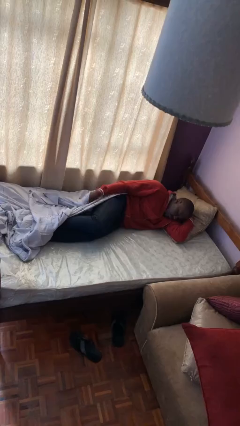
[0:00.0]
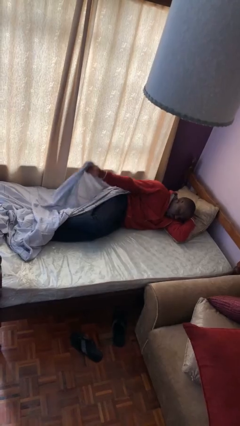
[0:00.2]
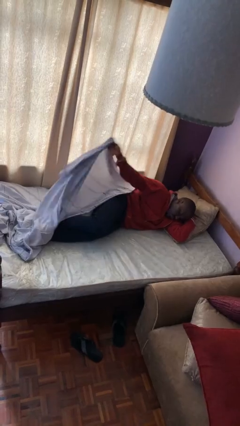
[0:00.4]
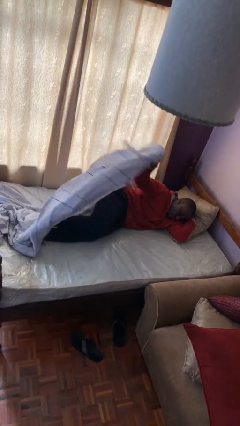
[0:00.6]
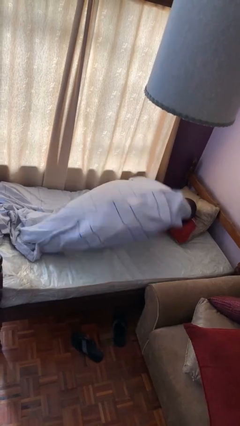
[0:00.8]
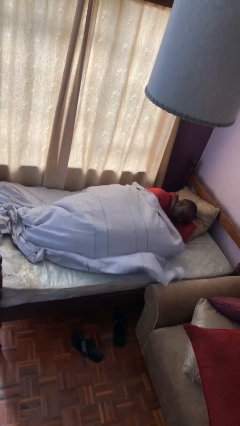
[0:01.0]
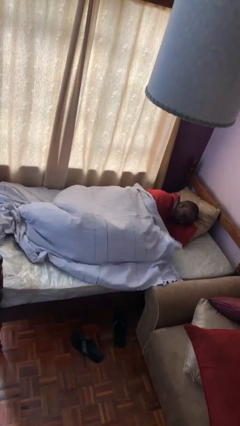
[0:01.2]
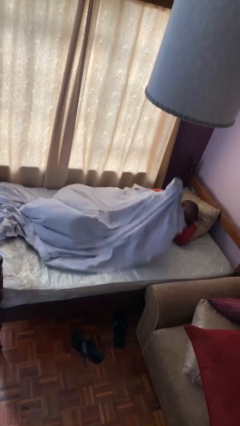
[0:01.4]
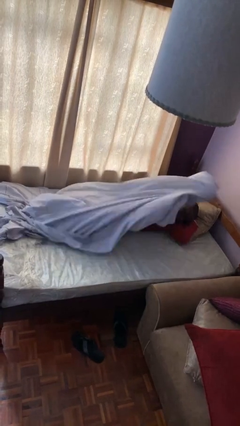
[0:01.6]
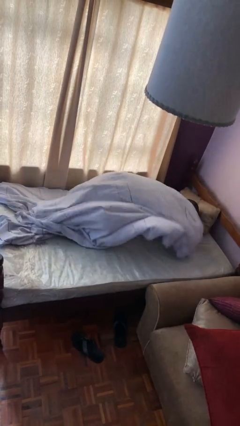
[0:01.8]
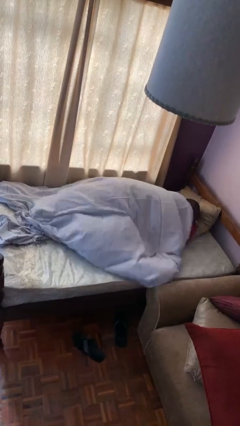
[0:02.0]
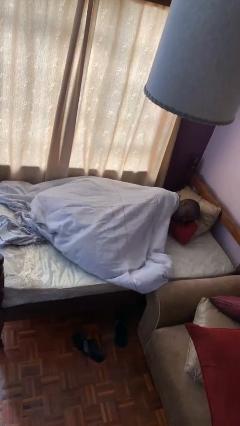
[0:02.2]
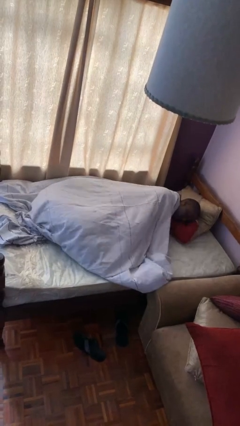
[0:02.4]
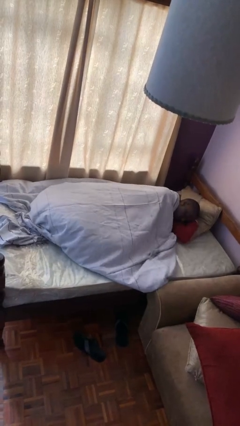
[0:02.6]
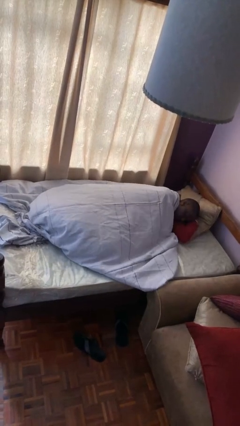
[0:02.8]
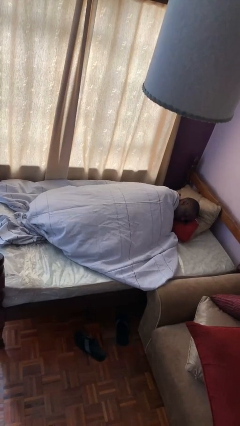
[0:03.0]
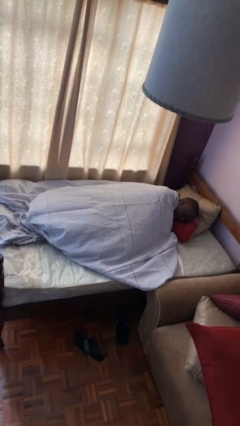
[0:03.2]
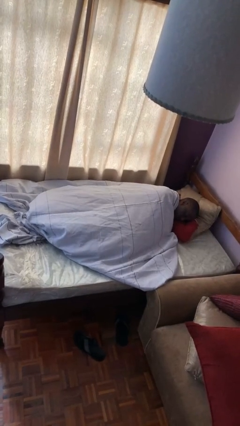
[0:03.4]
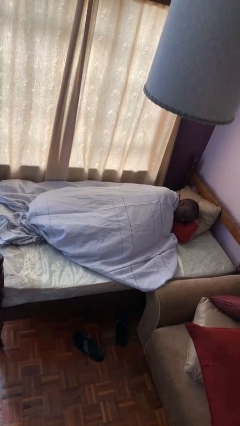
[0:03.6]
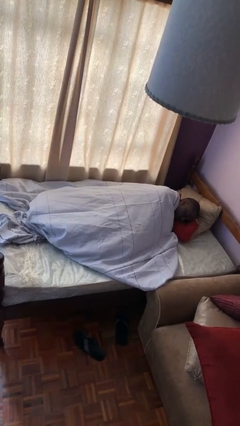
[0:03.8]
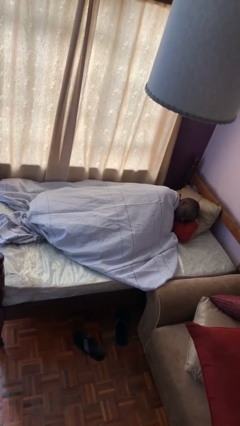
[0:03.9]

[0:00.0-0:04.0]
person covers with bedsheets

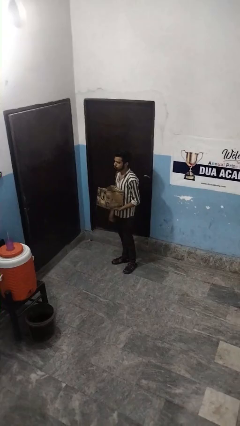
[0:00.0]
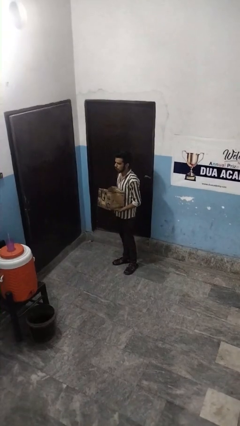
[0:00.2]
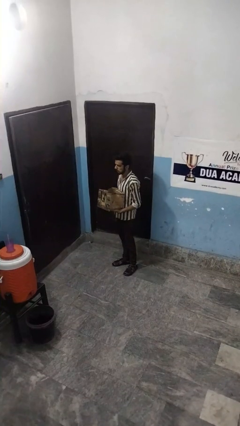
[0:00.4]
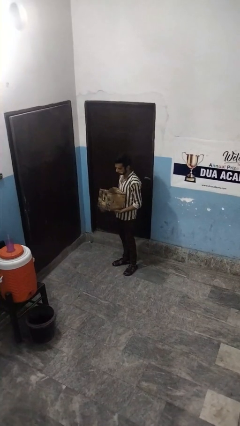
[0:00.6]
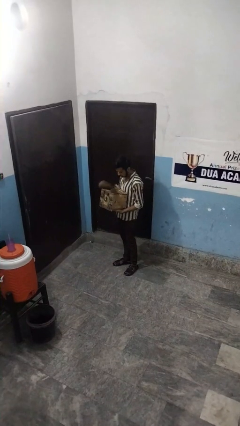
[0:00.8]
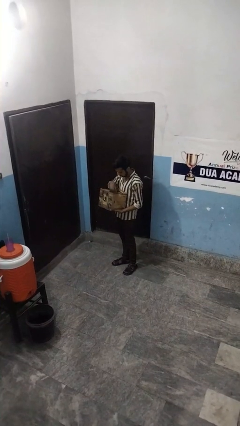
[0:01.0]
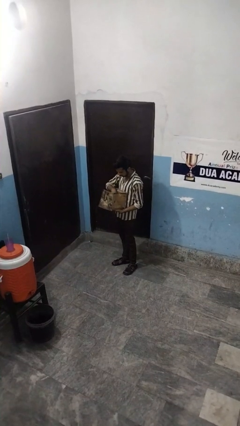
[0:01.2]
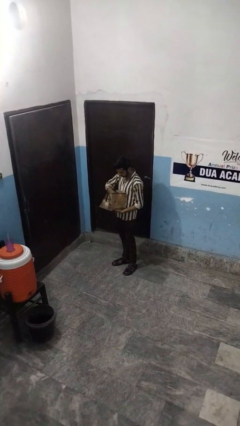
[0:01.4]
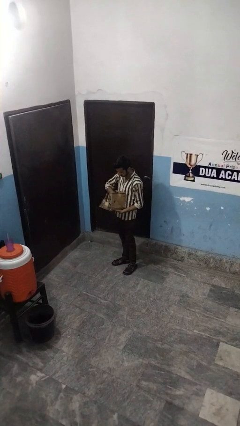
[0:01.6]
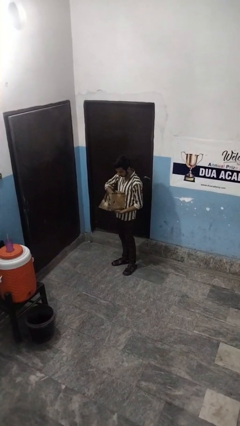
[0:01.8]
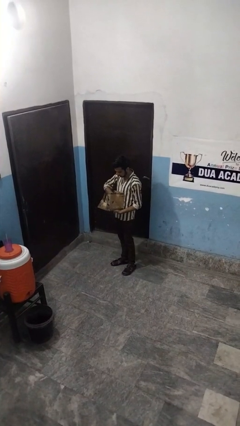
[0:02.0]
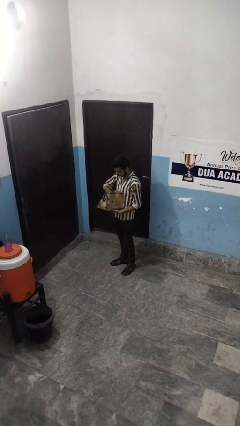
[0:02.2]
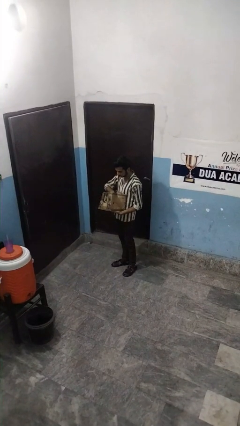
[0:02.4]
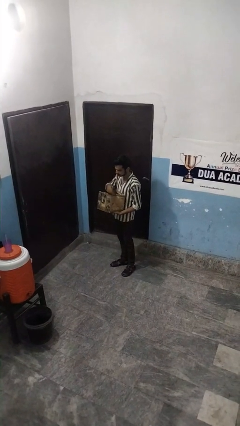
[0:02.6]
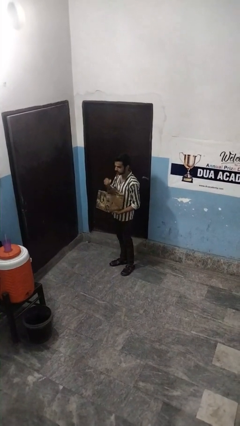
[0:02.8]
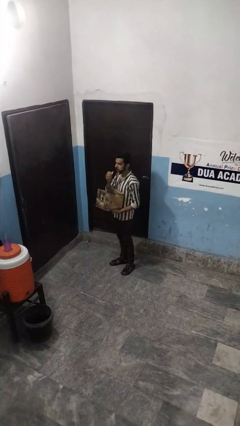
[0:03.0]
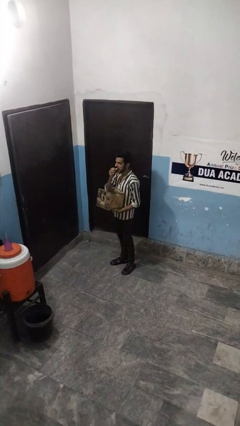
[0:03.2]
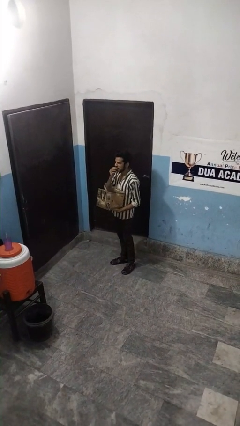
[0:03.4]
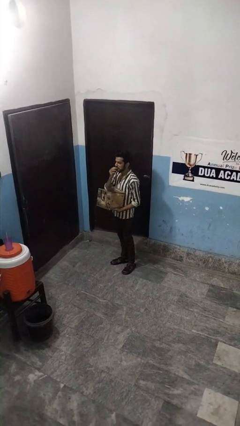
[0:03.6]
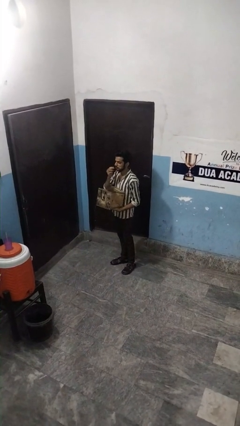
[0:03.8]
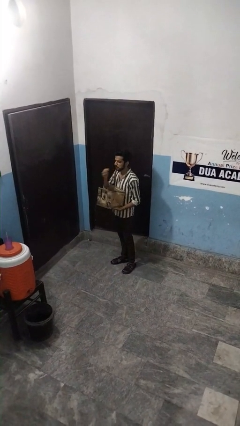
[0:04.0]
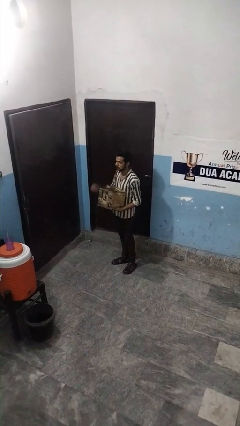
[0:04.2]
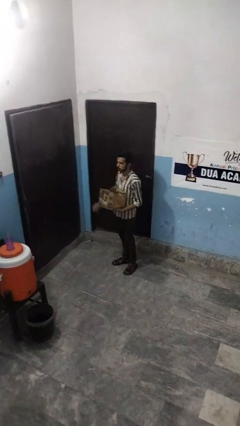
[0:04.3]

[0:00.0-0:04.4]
person eats snack from bag

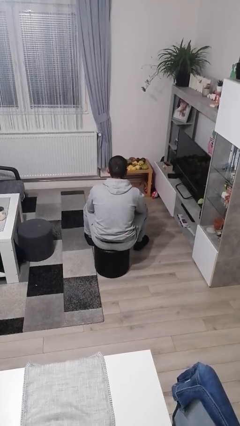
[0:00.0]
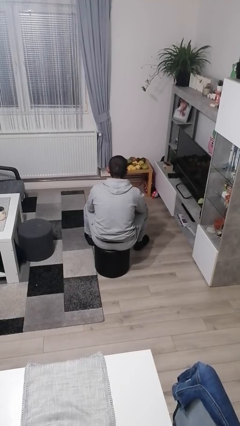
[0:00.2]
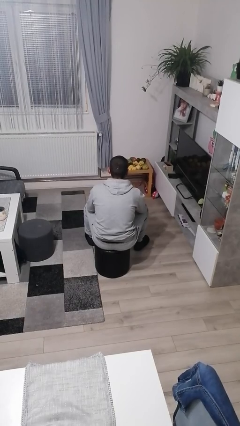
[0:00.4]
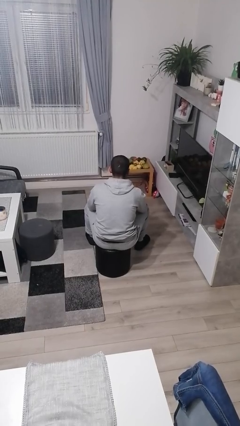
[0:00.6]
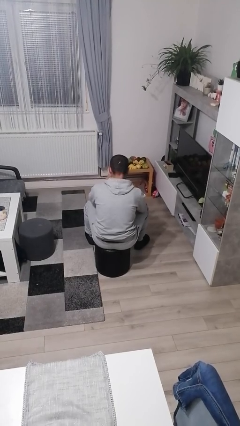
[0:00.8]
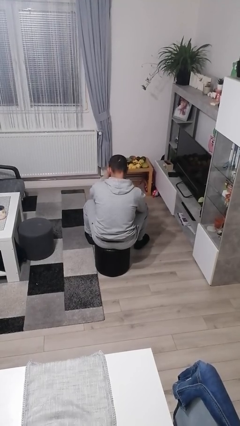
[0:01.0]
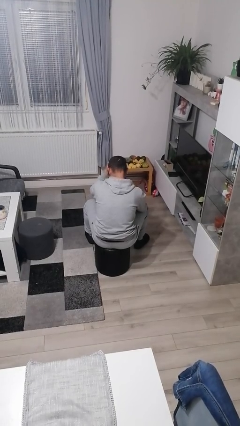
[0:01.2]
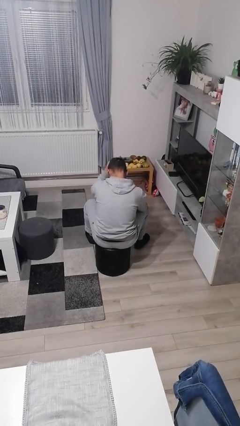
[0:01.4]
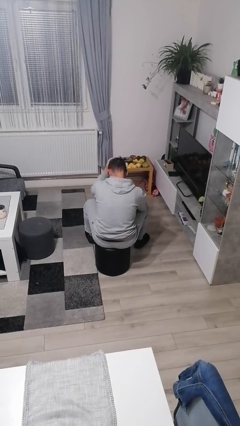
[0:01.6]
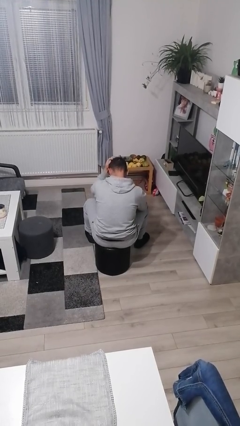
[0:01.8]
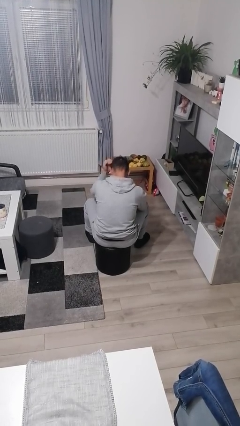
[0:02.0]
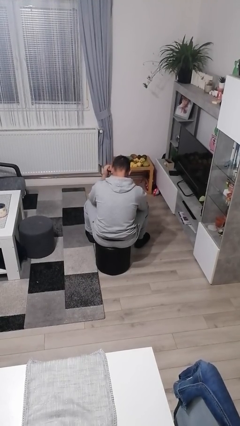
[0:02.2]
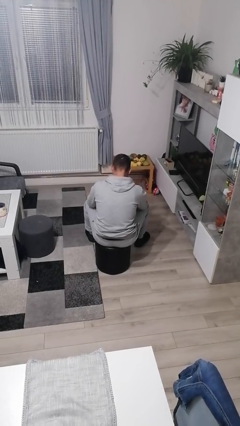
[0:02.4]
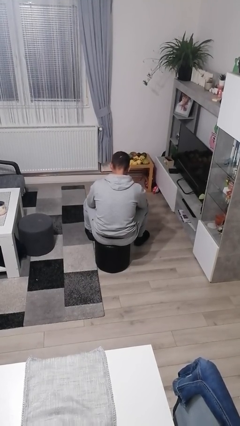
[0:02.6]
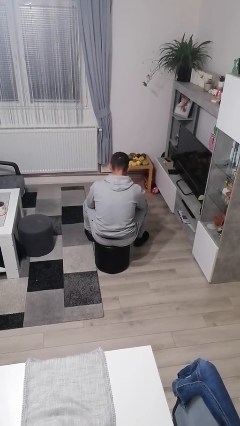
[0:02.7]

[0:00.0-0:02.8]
person strokes hair

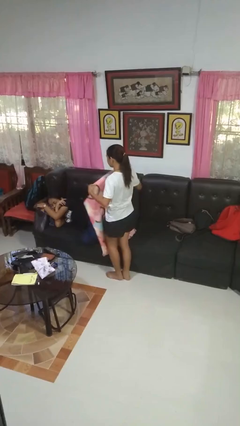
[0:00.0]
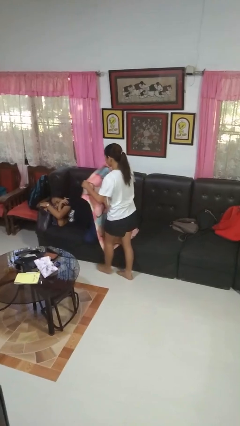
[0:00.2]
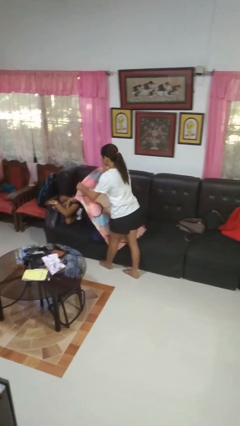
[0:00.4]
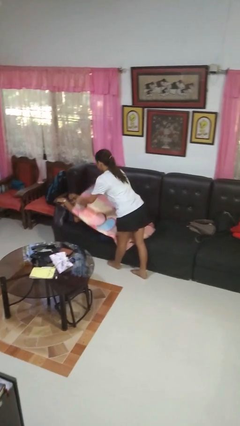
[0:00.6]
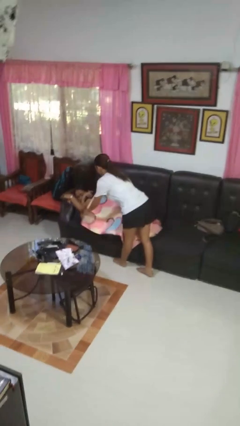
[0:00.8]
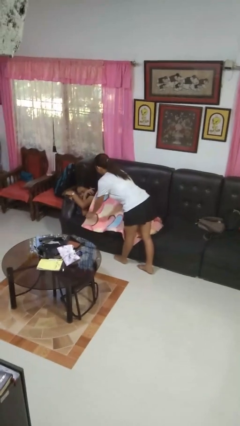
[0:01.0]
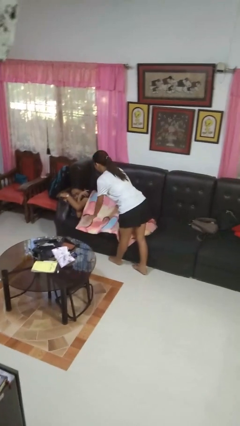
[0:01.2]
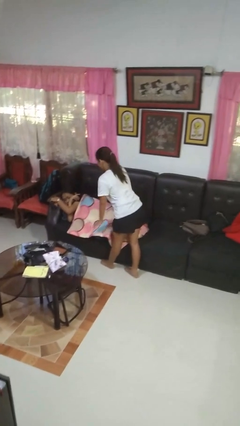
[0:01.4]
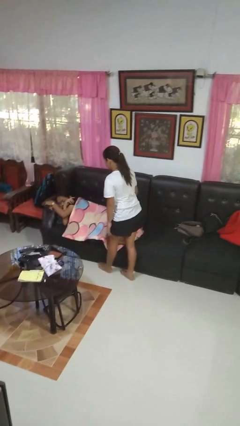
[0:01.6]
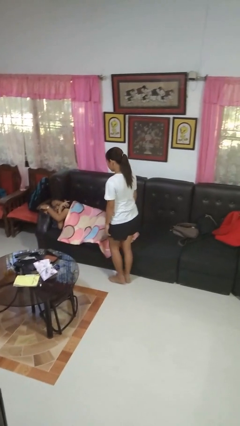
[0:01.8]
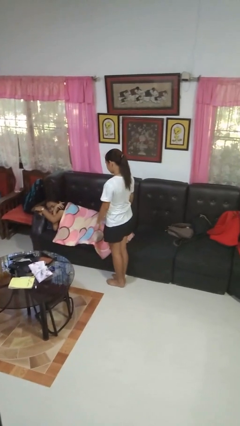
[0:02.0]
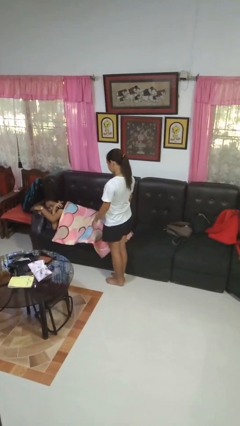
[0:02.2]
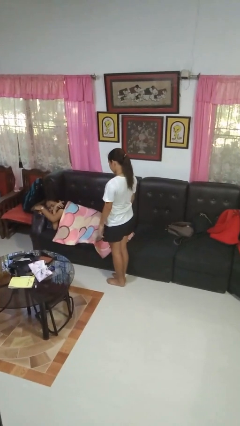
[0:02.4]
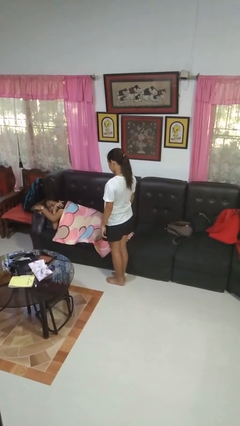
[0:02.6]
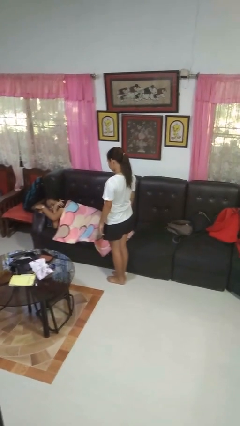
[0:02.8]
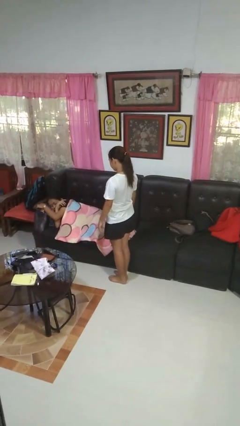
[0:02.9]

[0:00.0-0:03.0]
person covers friend with blanket

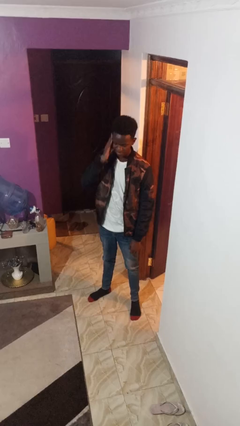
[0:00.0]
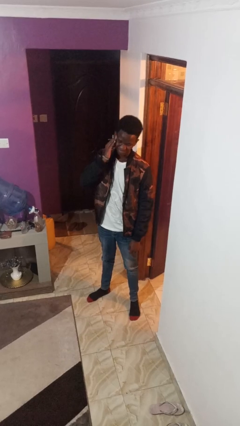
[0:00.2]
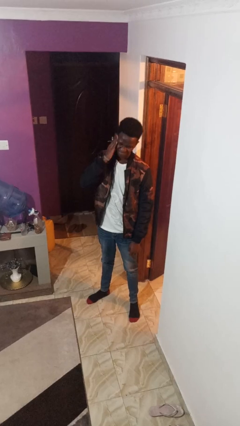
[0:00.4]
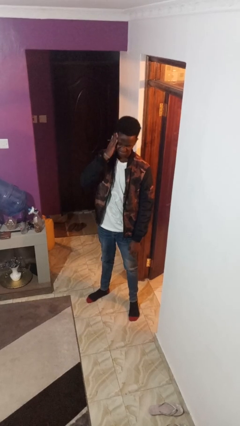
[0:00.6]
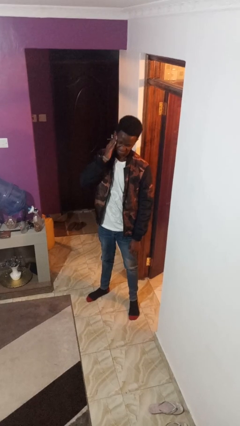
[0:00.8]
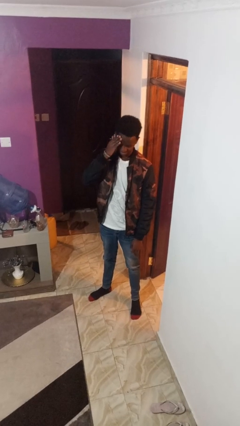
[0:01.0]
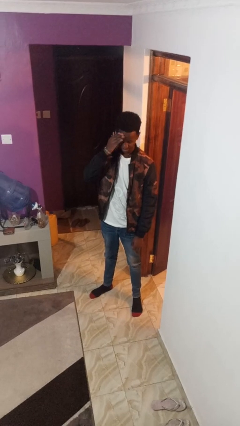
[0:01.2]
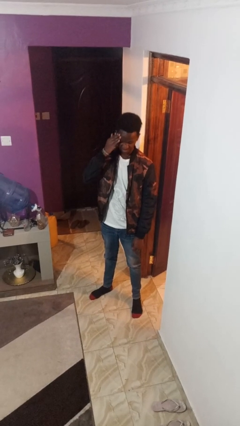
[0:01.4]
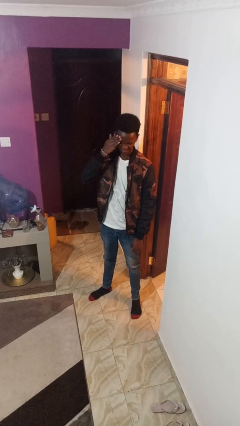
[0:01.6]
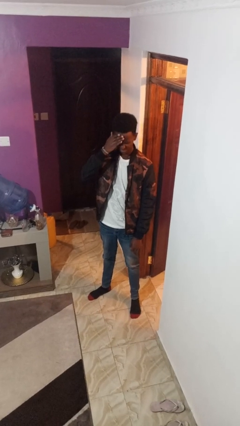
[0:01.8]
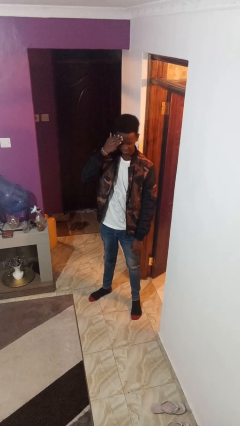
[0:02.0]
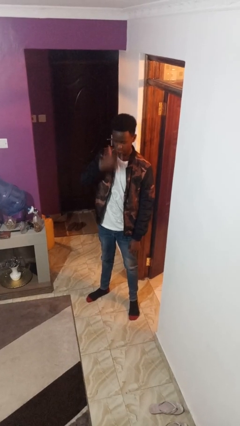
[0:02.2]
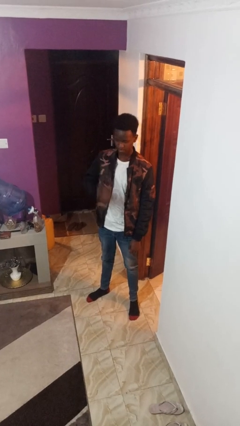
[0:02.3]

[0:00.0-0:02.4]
person scratches face

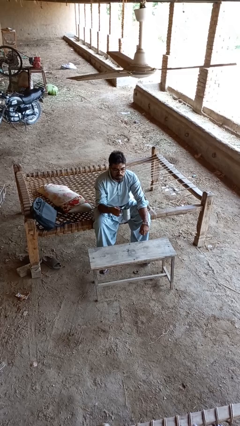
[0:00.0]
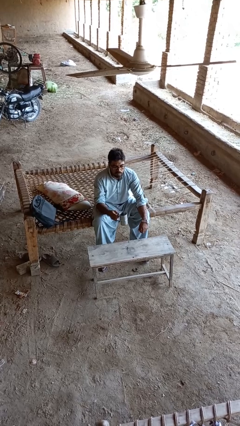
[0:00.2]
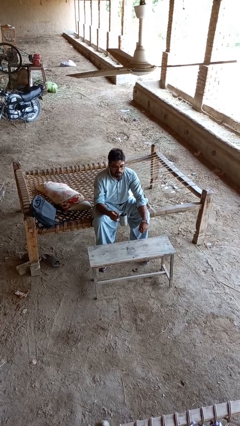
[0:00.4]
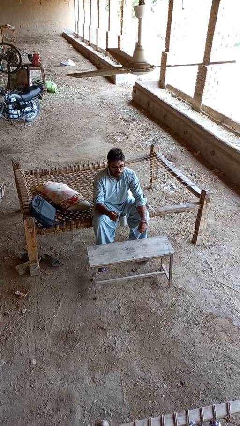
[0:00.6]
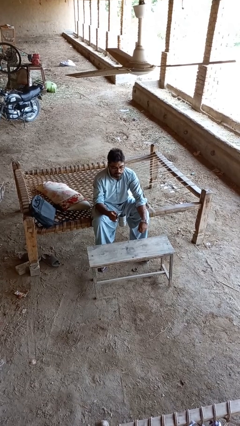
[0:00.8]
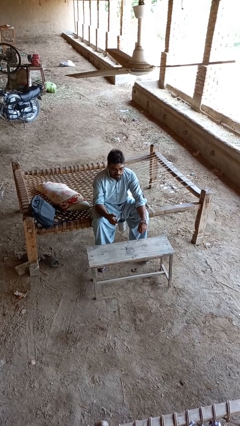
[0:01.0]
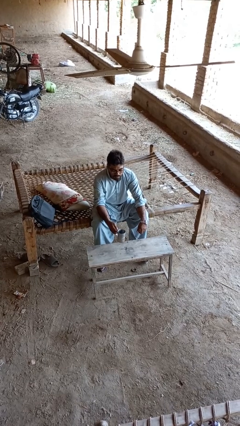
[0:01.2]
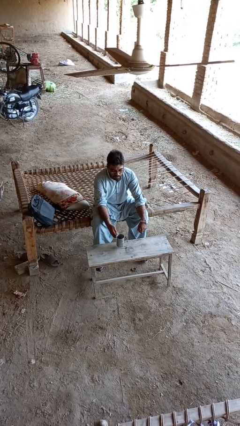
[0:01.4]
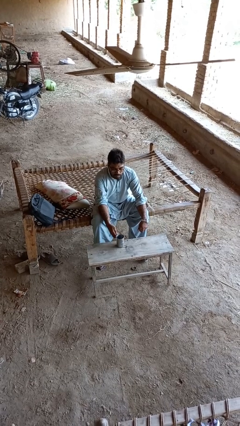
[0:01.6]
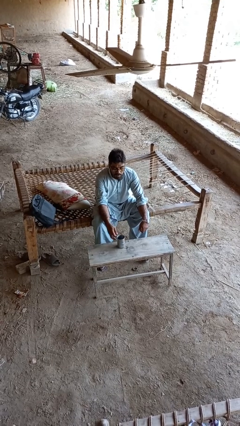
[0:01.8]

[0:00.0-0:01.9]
person puts down object on table
